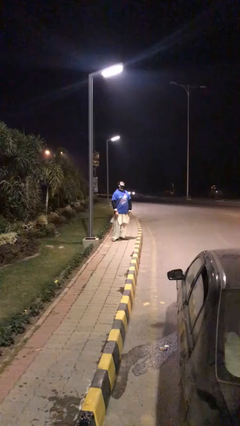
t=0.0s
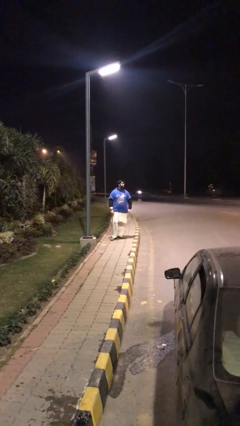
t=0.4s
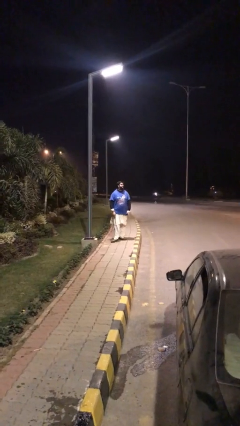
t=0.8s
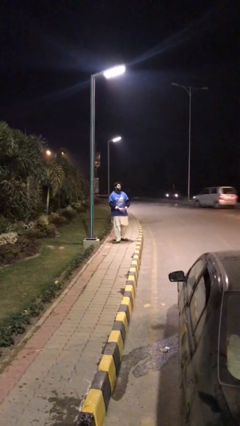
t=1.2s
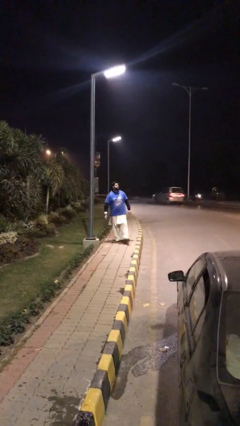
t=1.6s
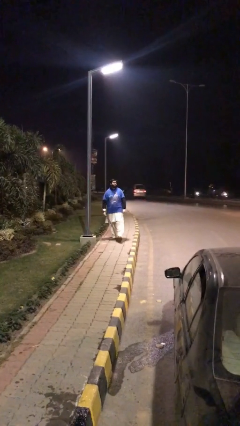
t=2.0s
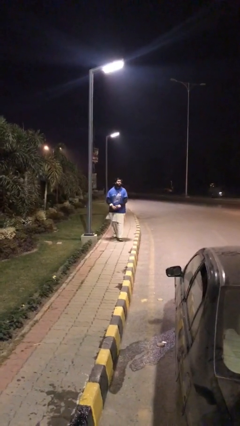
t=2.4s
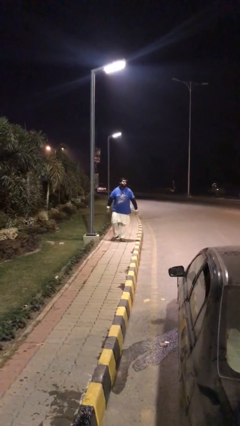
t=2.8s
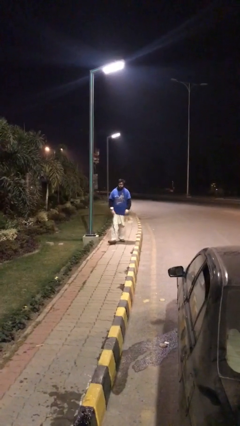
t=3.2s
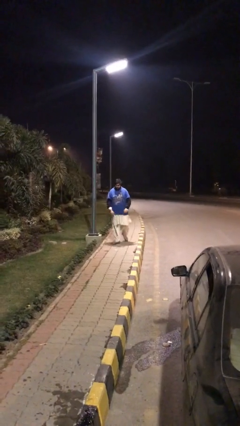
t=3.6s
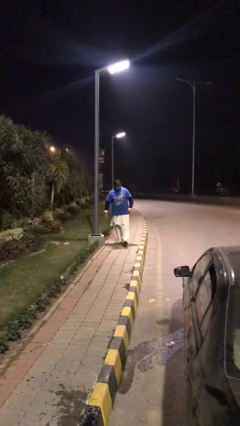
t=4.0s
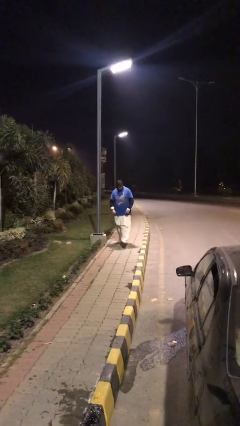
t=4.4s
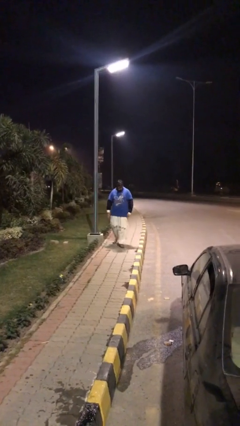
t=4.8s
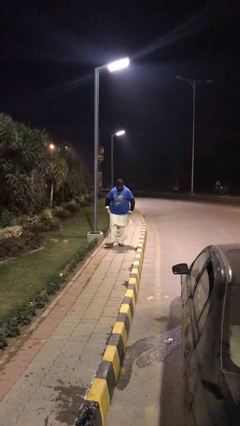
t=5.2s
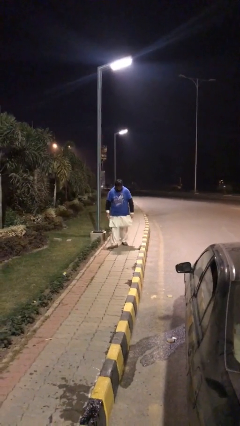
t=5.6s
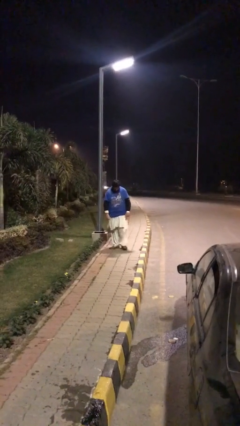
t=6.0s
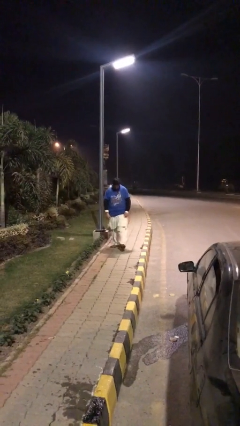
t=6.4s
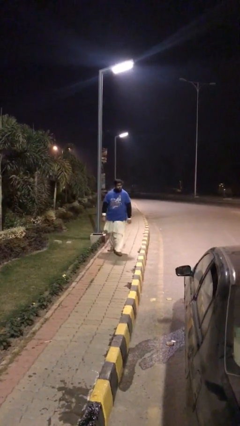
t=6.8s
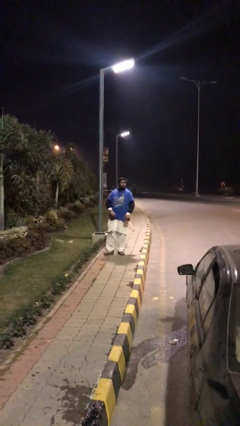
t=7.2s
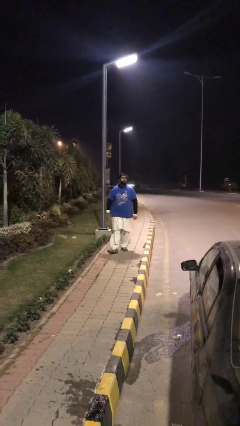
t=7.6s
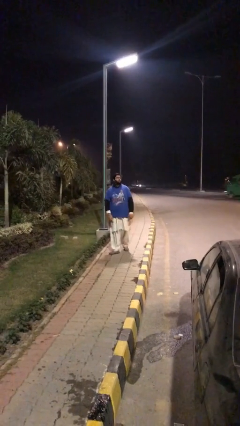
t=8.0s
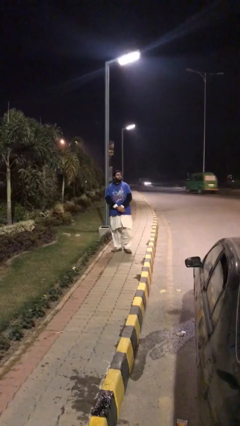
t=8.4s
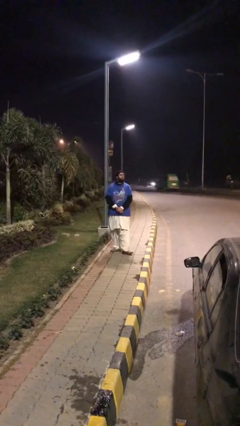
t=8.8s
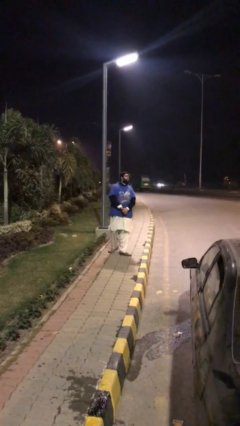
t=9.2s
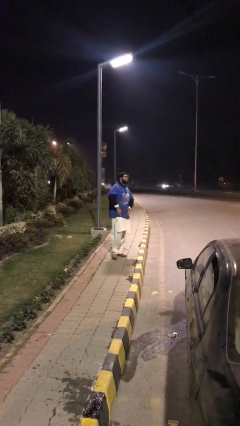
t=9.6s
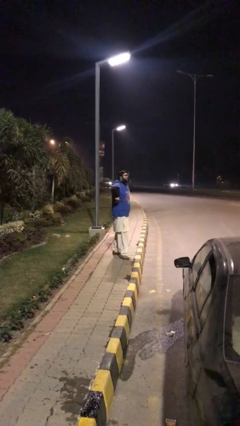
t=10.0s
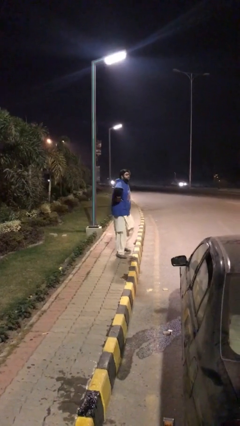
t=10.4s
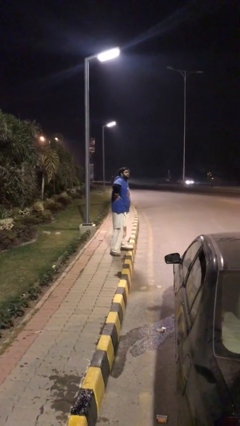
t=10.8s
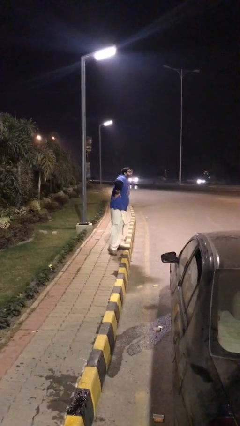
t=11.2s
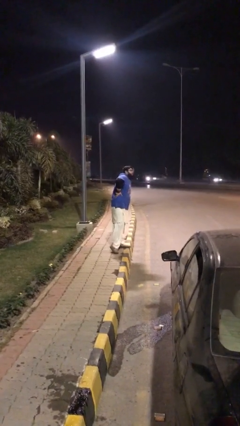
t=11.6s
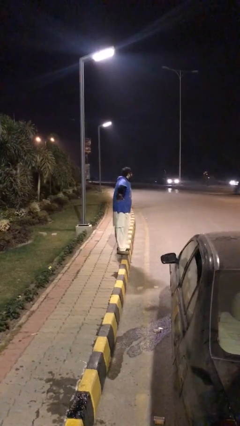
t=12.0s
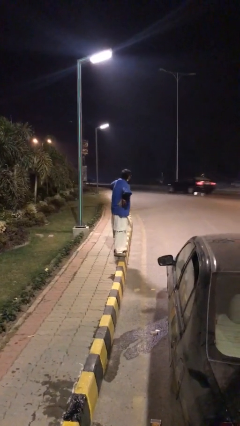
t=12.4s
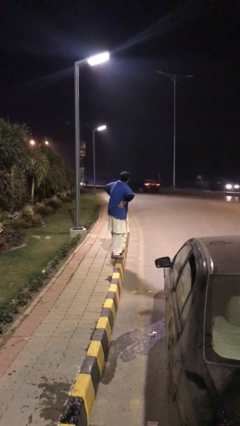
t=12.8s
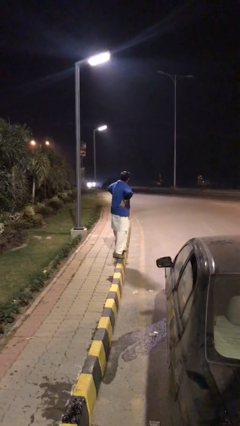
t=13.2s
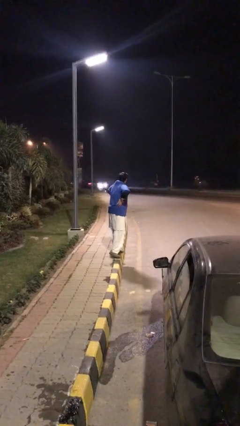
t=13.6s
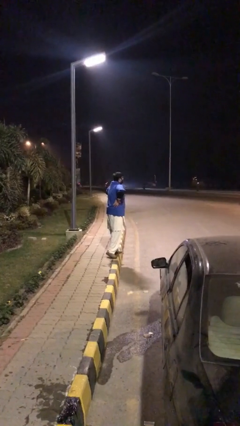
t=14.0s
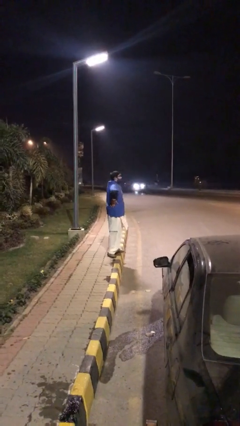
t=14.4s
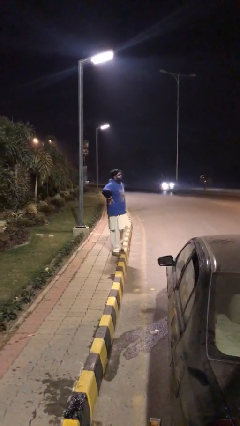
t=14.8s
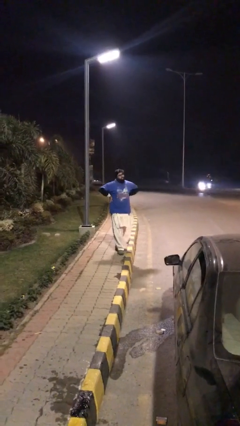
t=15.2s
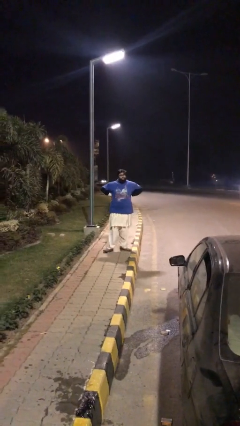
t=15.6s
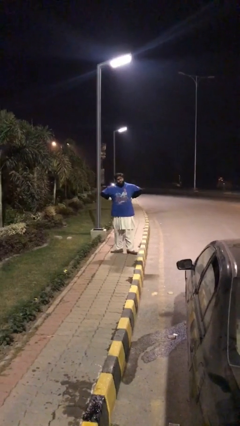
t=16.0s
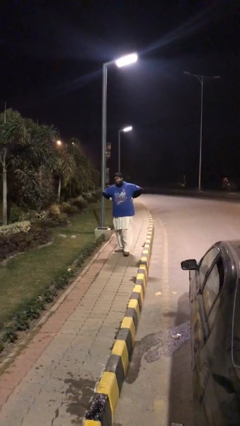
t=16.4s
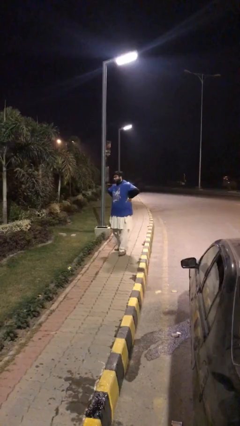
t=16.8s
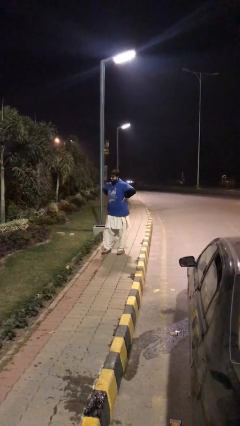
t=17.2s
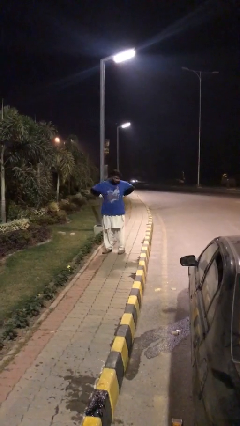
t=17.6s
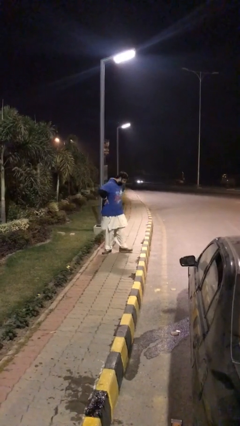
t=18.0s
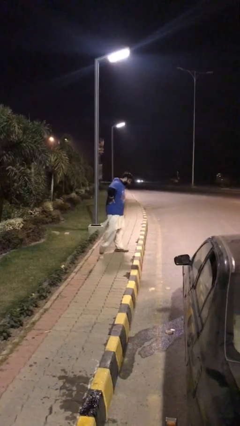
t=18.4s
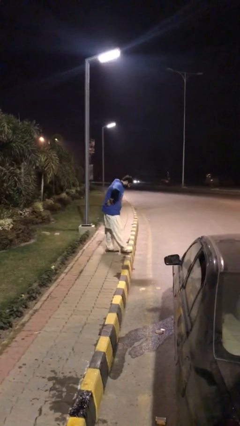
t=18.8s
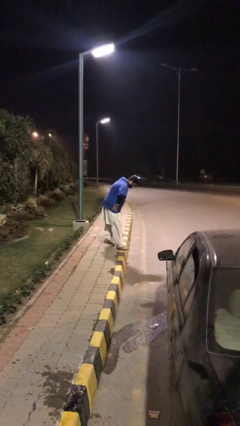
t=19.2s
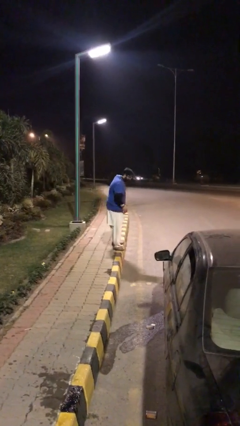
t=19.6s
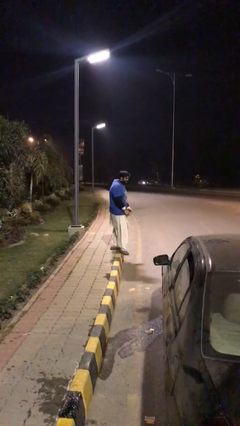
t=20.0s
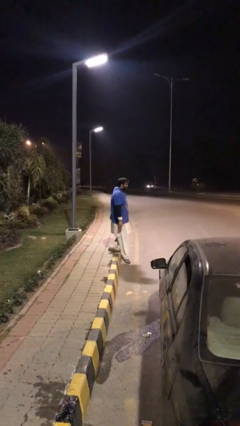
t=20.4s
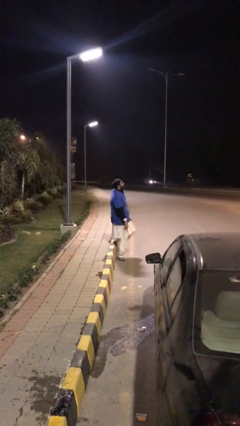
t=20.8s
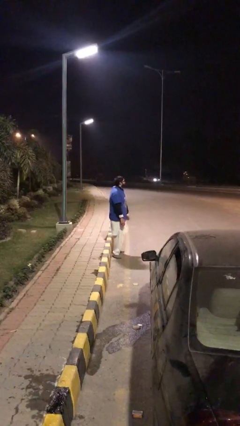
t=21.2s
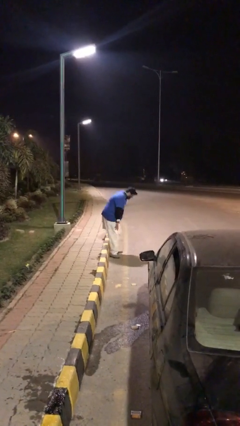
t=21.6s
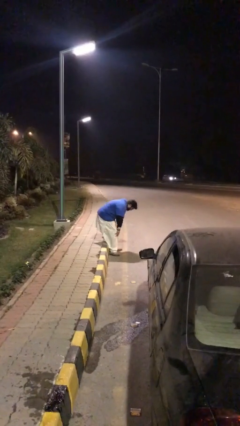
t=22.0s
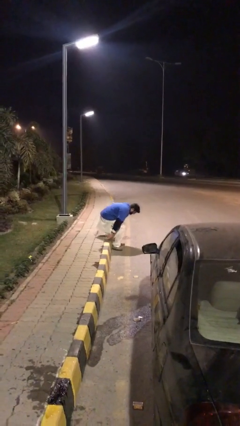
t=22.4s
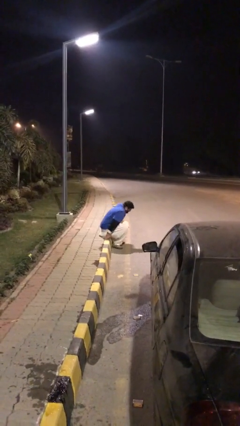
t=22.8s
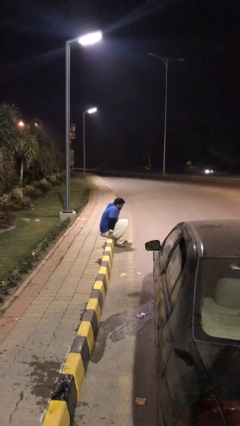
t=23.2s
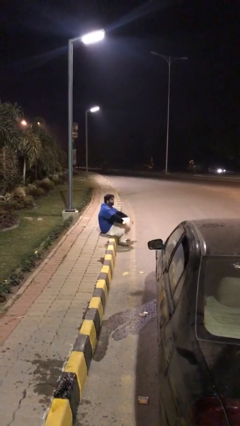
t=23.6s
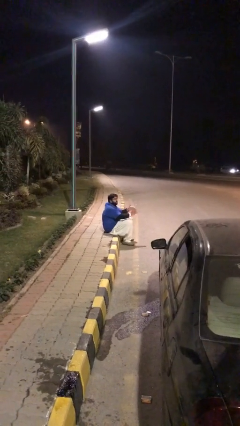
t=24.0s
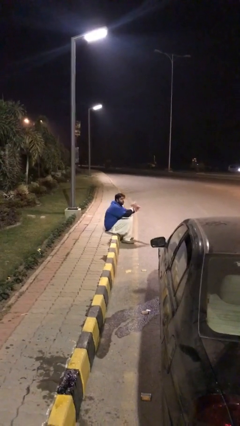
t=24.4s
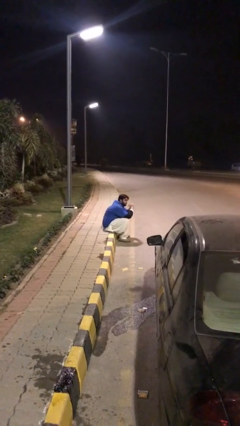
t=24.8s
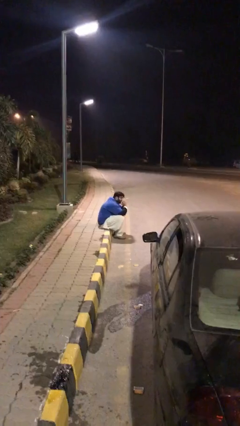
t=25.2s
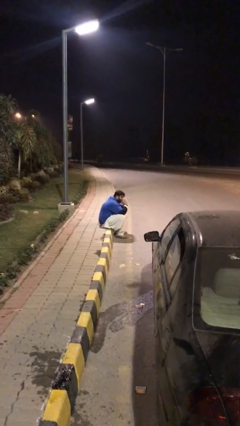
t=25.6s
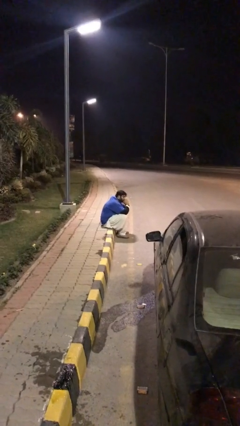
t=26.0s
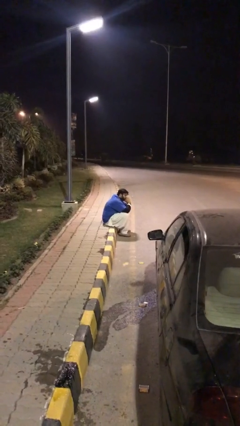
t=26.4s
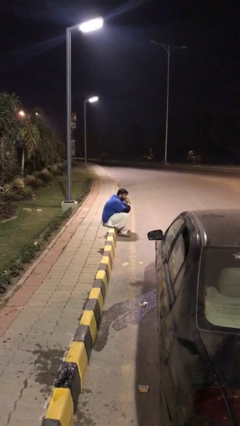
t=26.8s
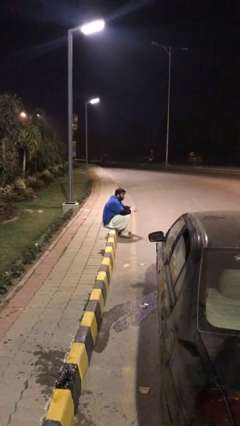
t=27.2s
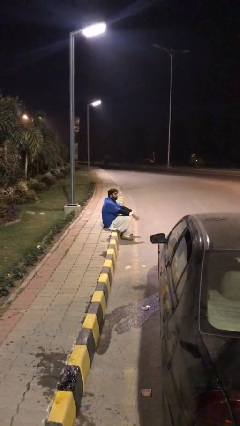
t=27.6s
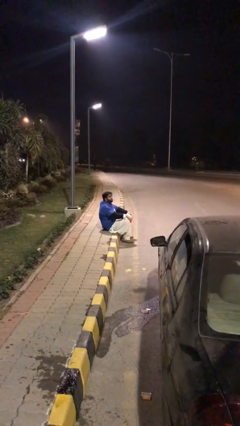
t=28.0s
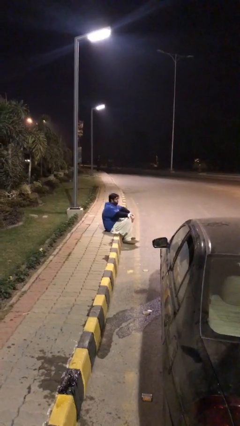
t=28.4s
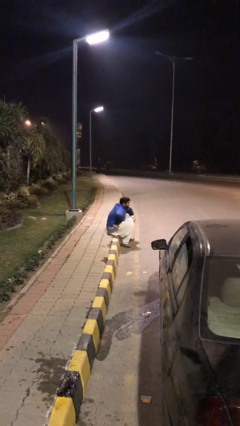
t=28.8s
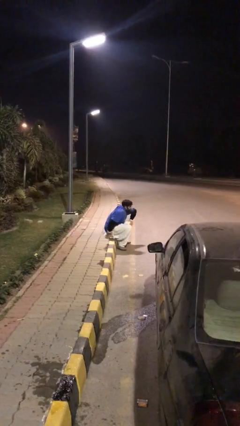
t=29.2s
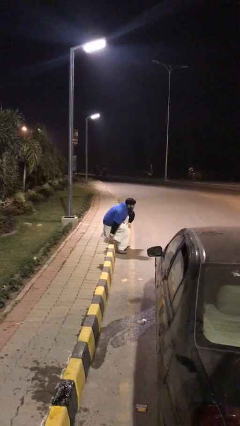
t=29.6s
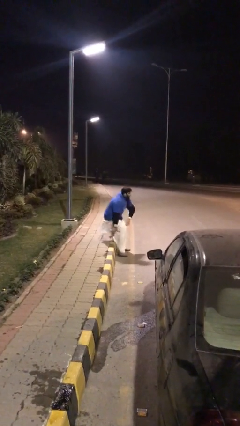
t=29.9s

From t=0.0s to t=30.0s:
person walks

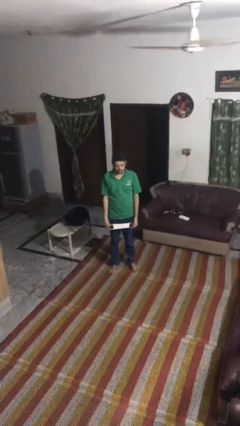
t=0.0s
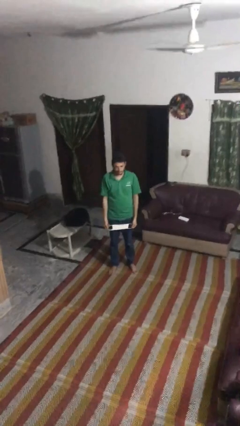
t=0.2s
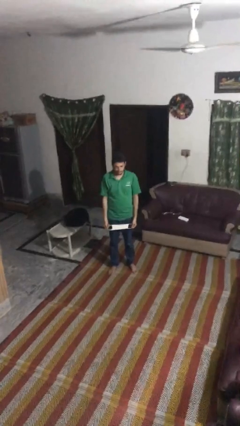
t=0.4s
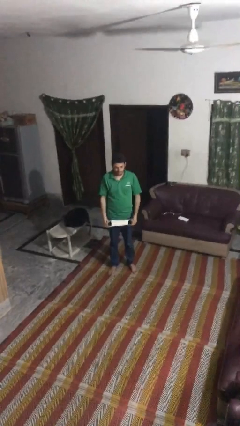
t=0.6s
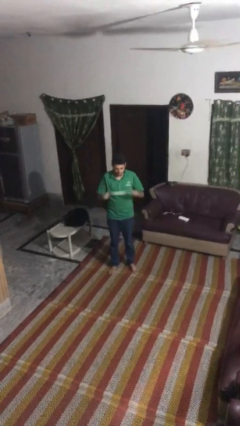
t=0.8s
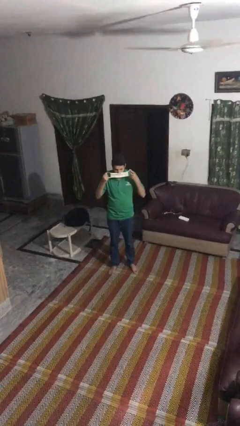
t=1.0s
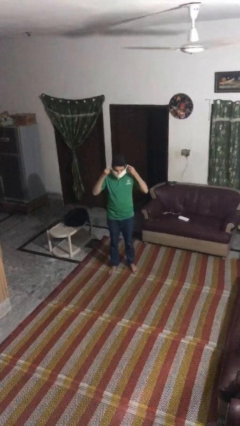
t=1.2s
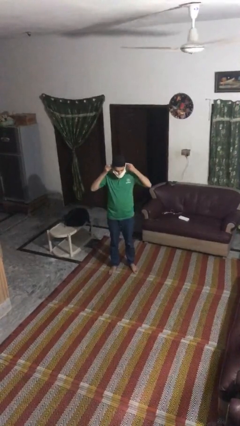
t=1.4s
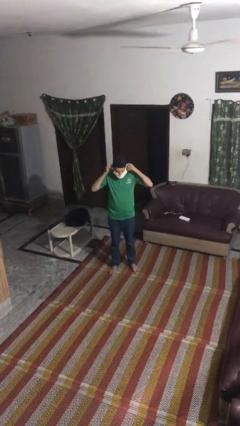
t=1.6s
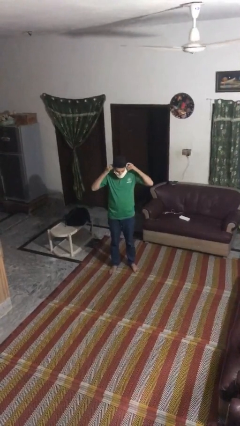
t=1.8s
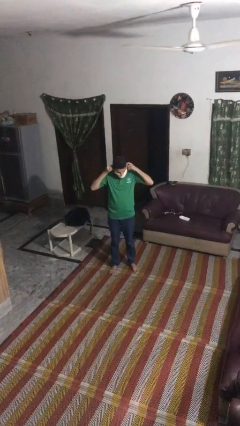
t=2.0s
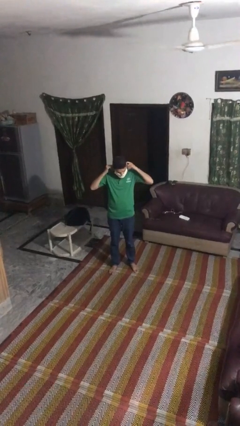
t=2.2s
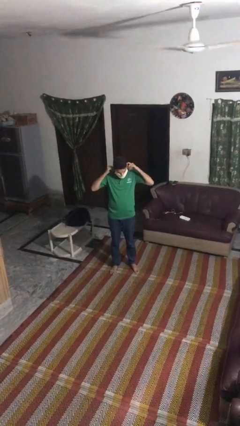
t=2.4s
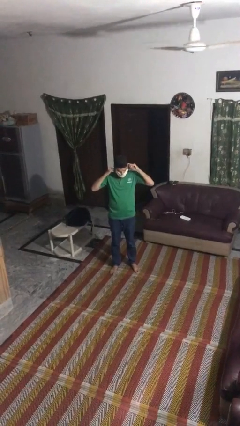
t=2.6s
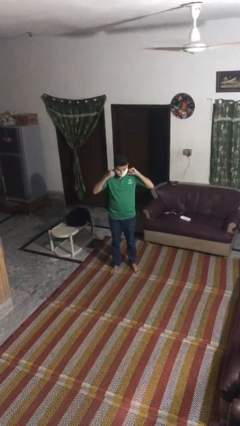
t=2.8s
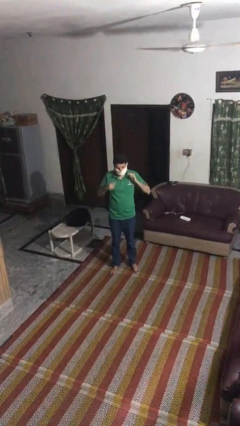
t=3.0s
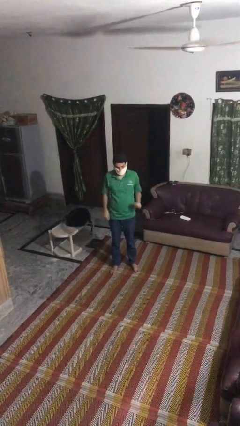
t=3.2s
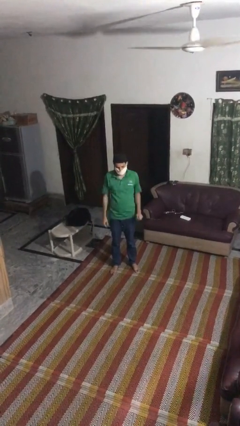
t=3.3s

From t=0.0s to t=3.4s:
person puts on facemask
